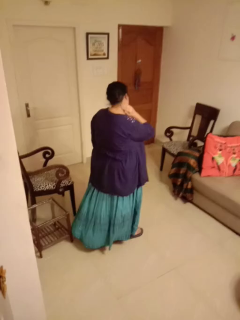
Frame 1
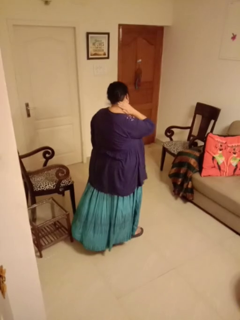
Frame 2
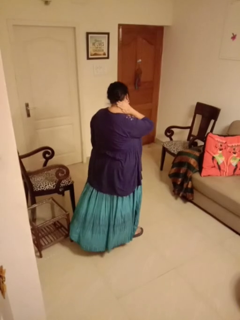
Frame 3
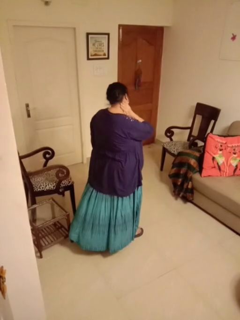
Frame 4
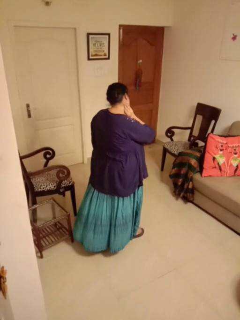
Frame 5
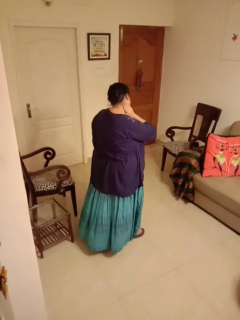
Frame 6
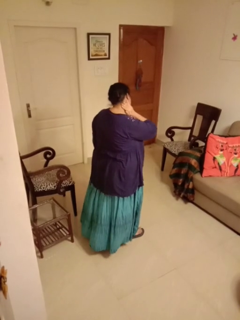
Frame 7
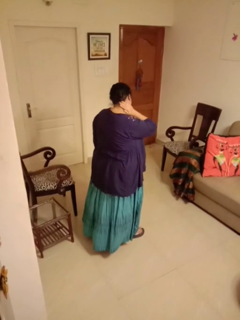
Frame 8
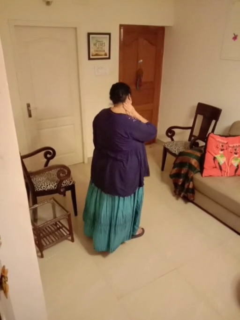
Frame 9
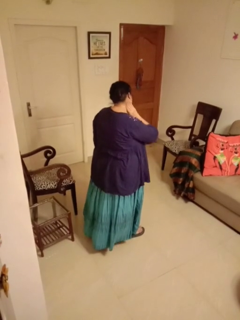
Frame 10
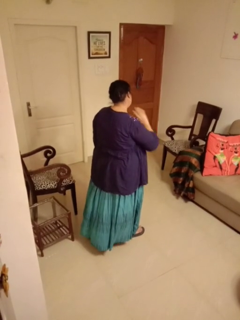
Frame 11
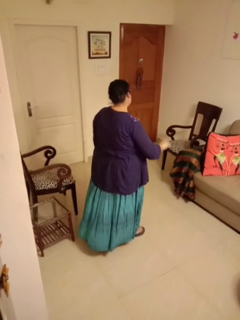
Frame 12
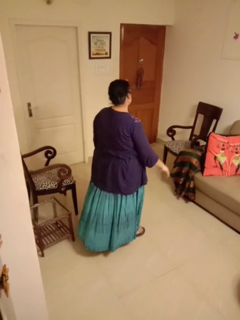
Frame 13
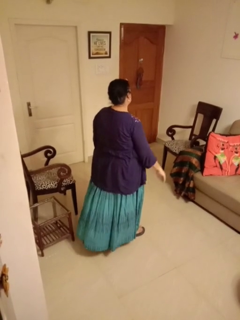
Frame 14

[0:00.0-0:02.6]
person rubs neck

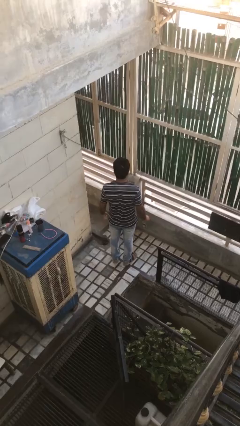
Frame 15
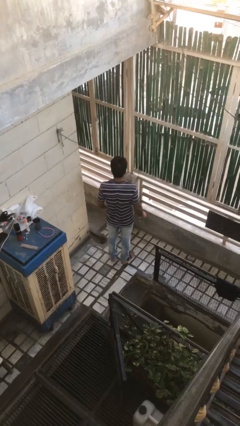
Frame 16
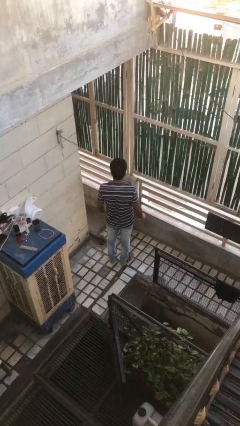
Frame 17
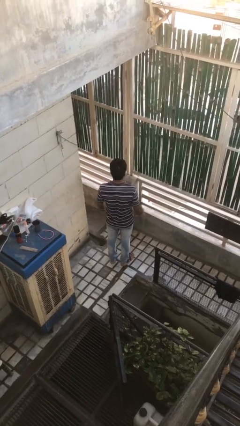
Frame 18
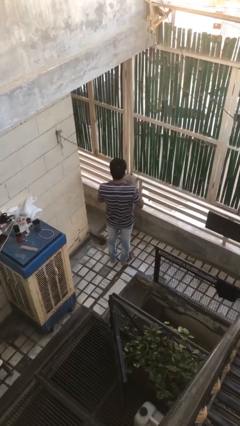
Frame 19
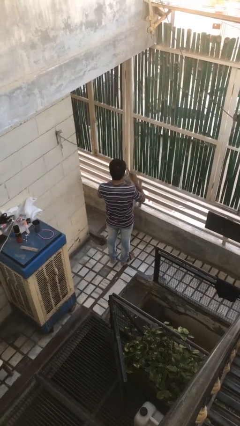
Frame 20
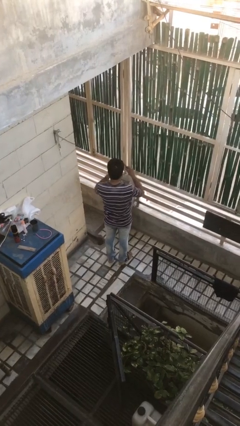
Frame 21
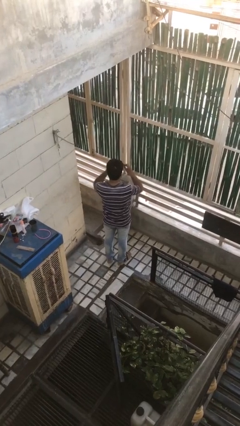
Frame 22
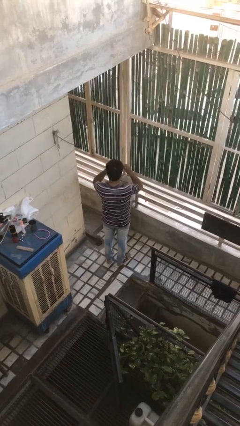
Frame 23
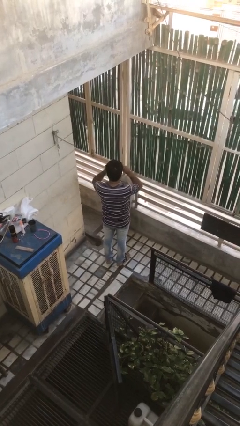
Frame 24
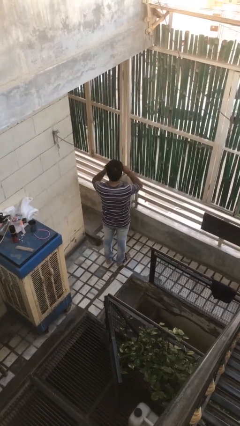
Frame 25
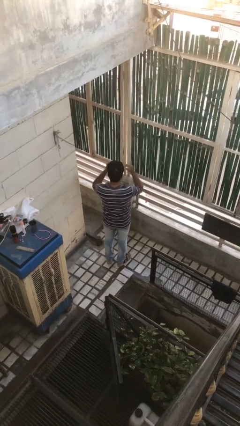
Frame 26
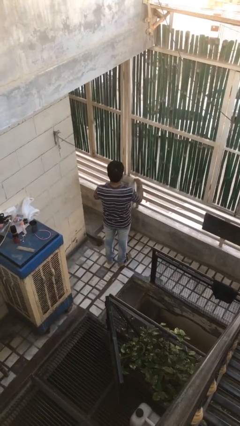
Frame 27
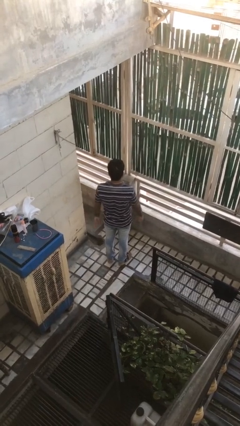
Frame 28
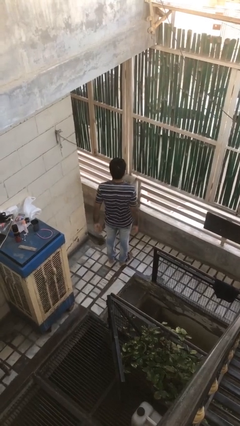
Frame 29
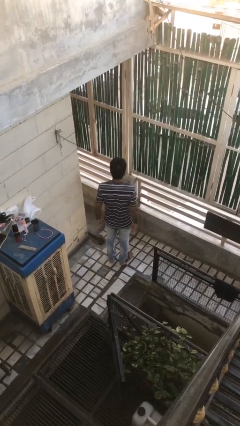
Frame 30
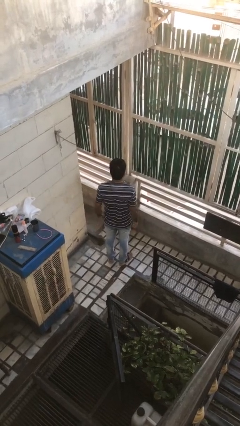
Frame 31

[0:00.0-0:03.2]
person puts on sunglasses

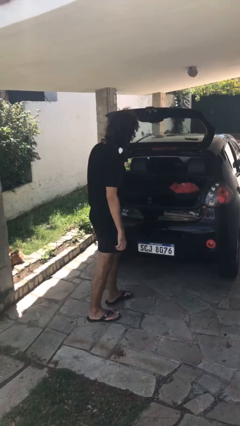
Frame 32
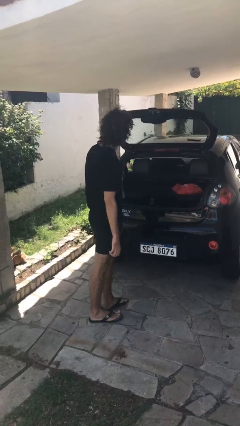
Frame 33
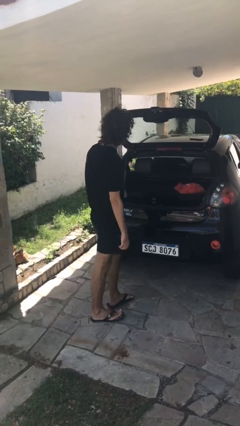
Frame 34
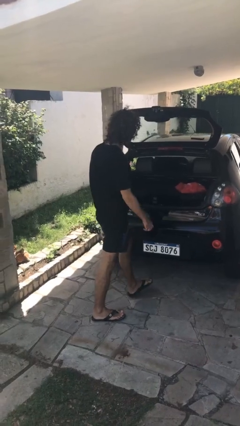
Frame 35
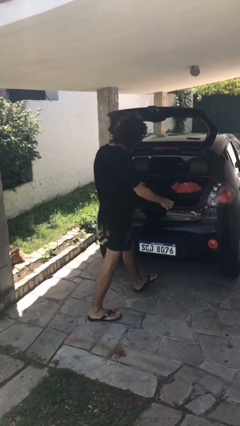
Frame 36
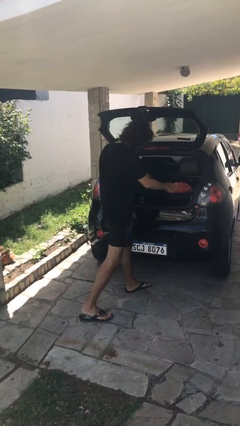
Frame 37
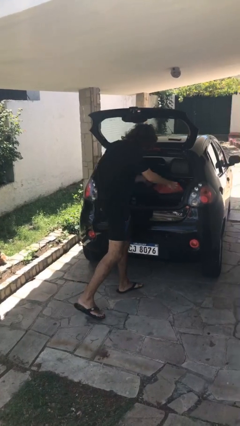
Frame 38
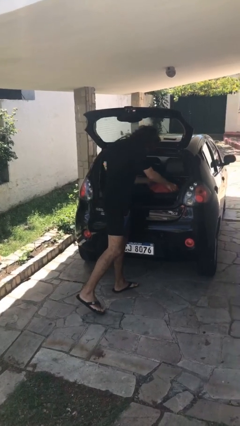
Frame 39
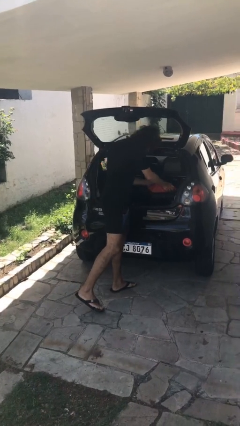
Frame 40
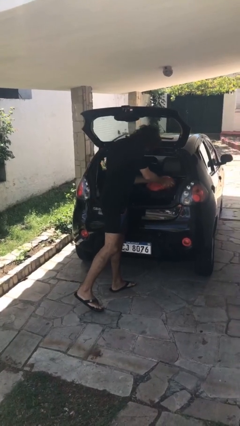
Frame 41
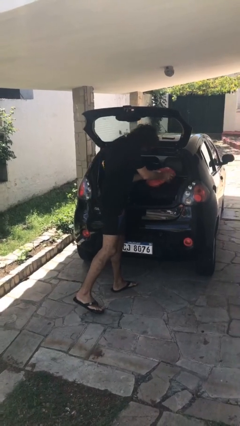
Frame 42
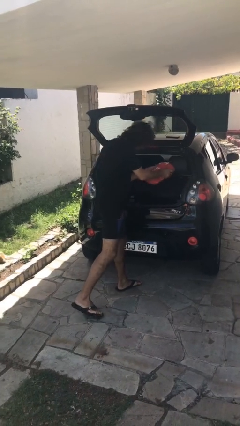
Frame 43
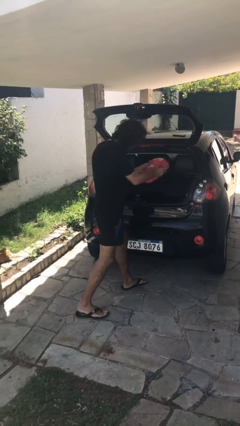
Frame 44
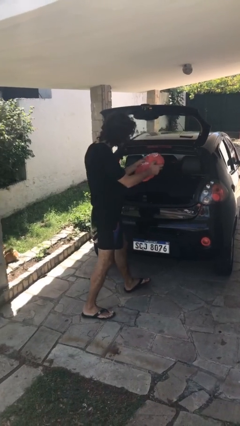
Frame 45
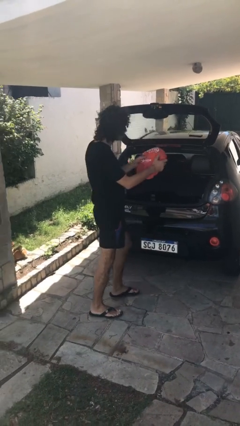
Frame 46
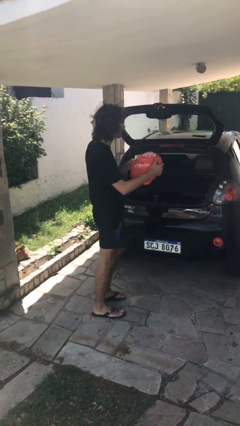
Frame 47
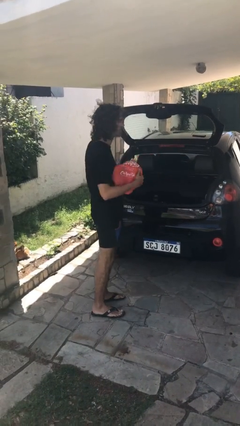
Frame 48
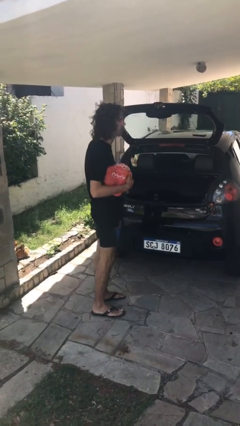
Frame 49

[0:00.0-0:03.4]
person unloads car

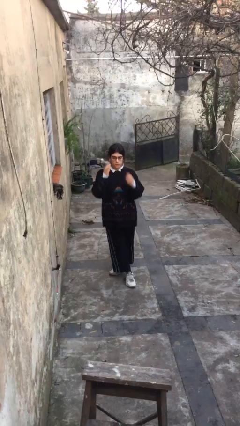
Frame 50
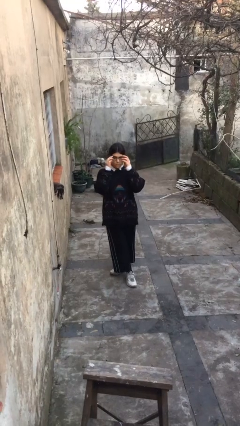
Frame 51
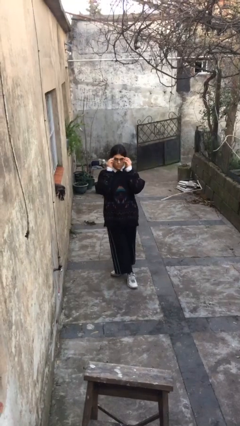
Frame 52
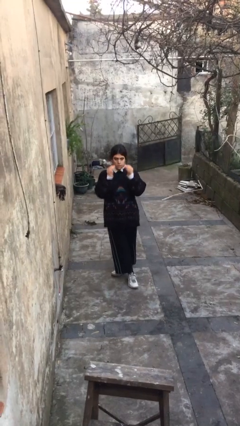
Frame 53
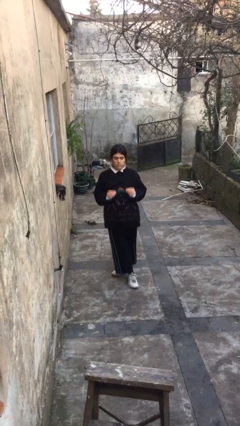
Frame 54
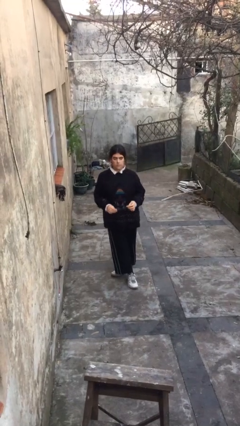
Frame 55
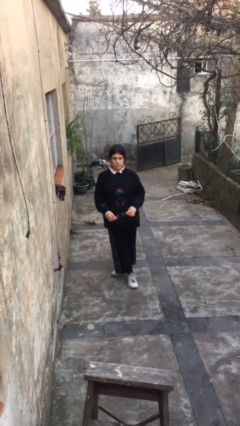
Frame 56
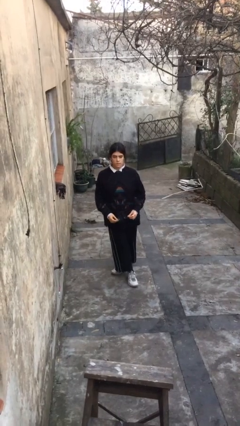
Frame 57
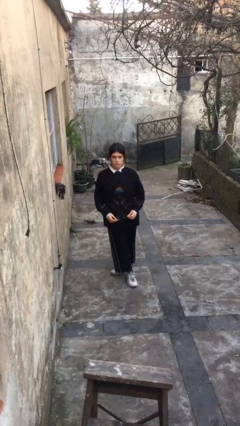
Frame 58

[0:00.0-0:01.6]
person takes off glasses

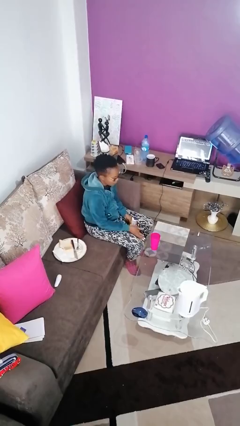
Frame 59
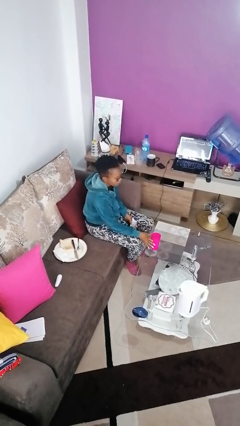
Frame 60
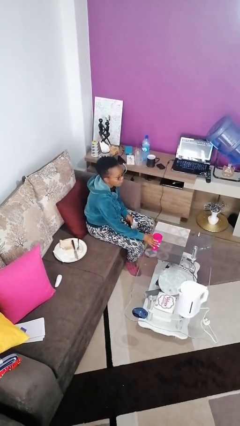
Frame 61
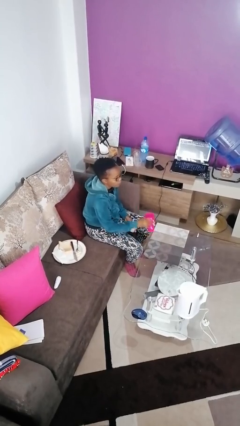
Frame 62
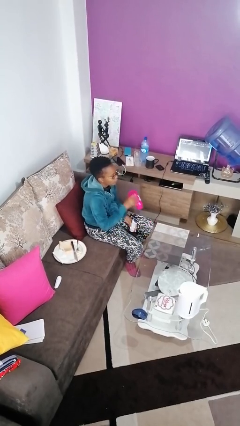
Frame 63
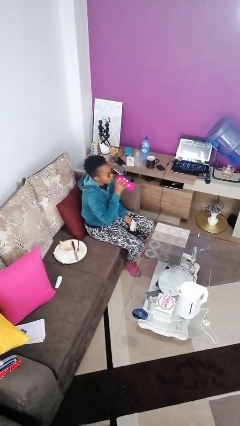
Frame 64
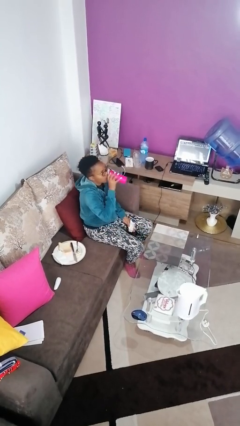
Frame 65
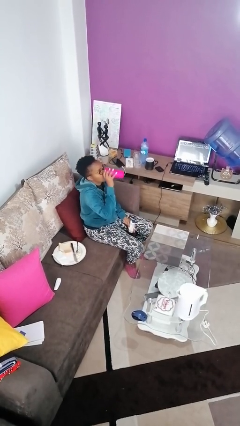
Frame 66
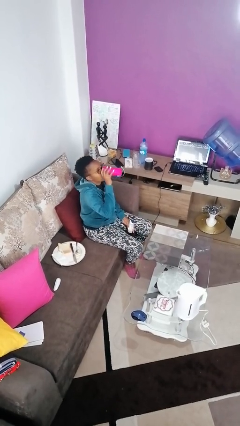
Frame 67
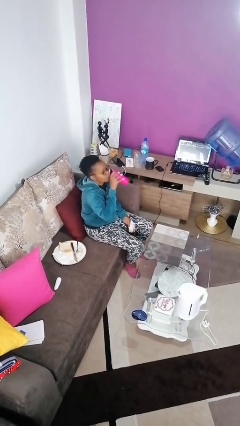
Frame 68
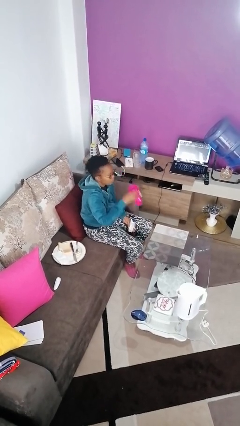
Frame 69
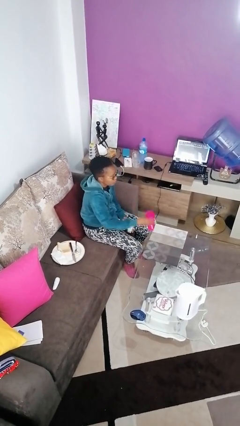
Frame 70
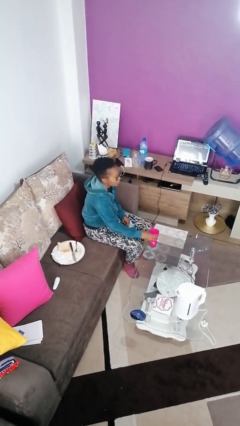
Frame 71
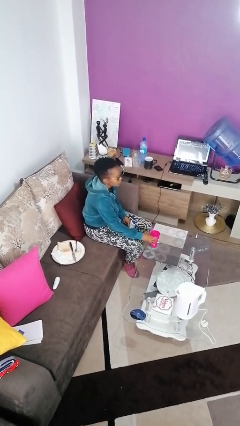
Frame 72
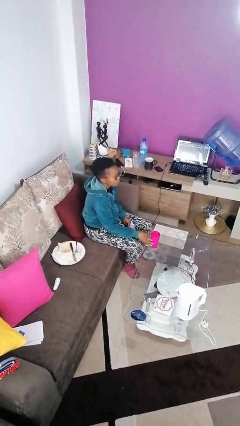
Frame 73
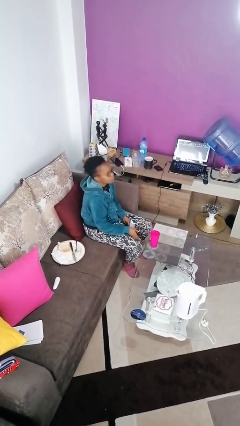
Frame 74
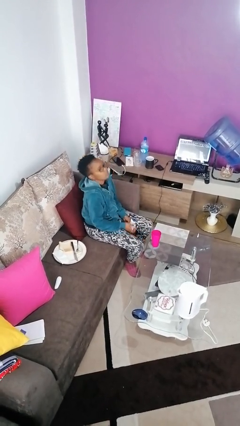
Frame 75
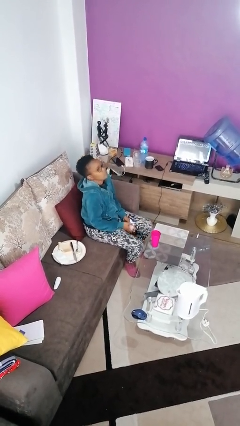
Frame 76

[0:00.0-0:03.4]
person drinks from cup

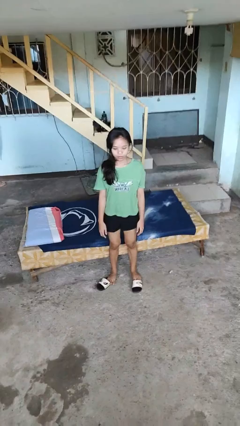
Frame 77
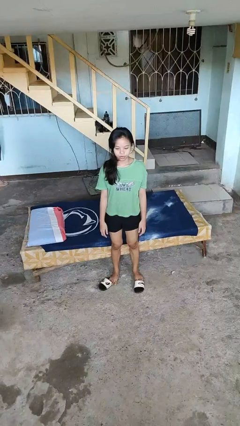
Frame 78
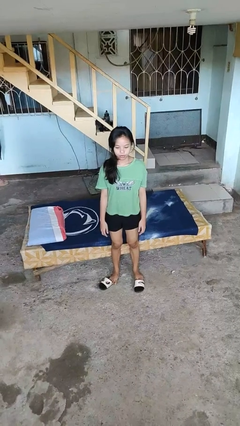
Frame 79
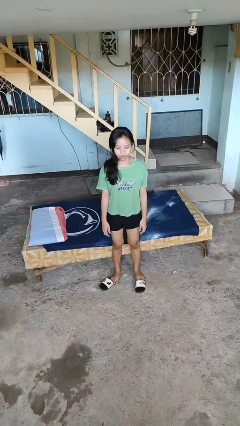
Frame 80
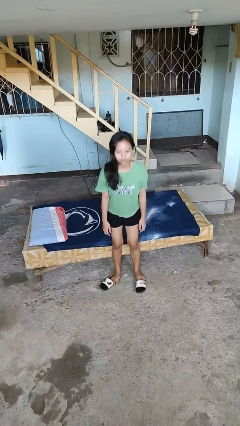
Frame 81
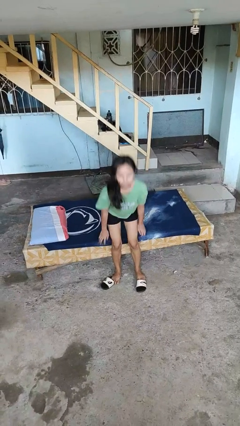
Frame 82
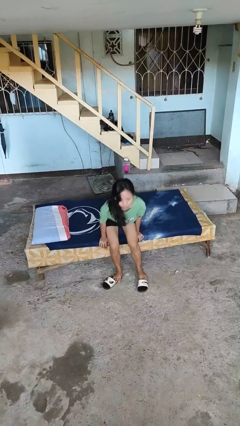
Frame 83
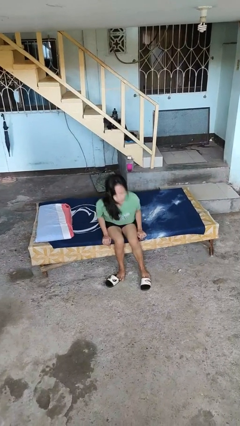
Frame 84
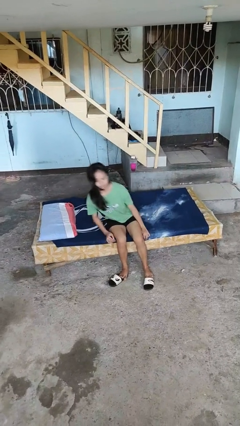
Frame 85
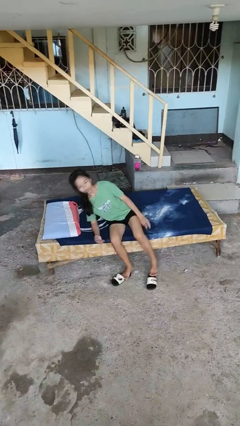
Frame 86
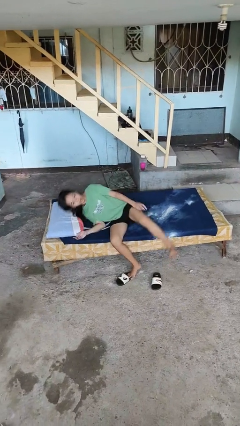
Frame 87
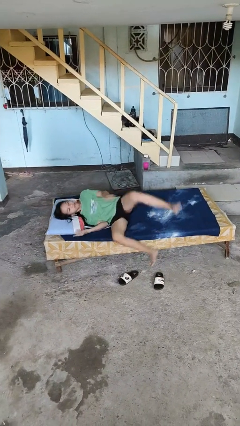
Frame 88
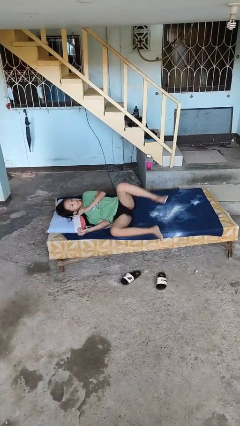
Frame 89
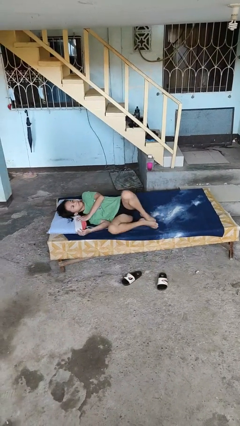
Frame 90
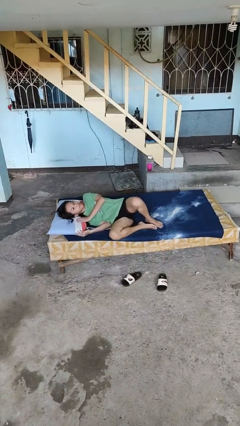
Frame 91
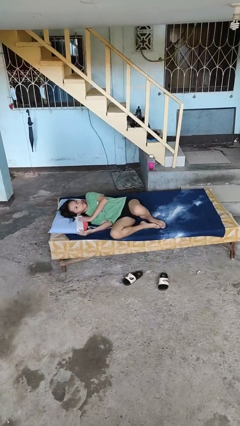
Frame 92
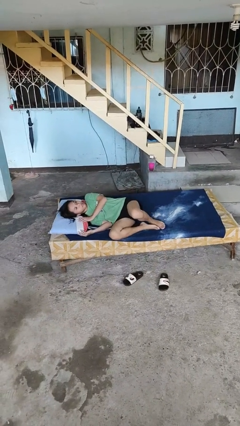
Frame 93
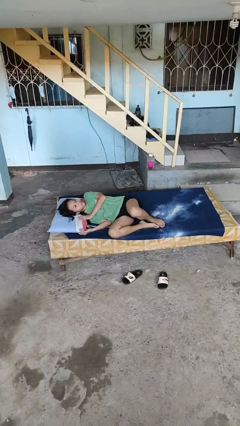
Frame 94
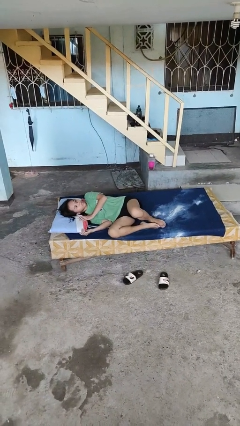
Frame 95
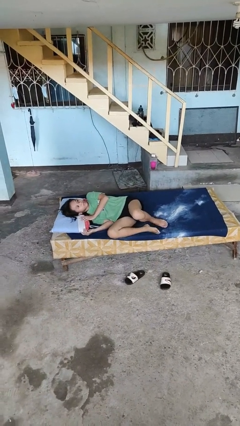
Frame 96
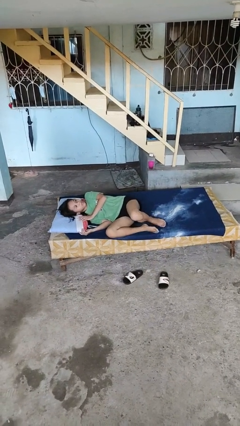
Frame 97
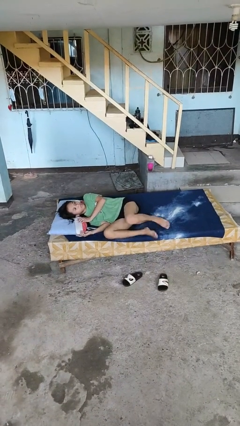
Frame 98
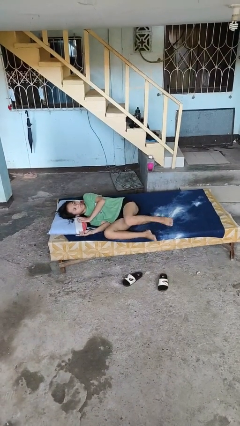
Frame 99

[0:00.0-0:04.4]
person lies down on bed
